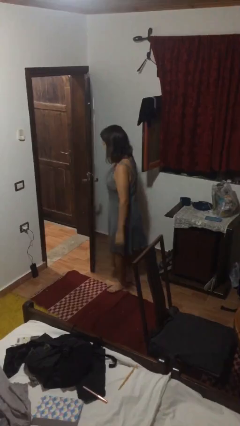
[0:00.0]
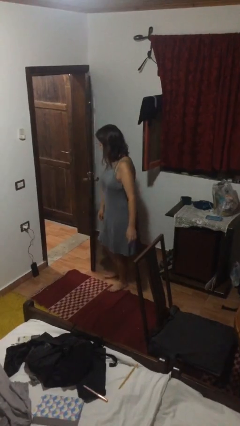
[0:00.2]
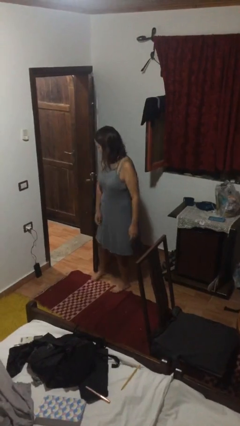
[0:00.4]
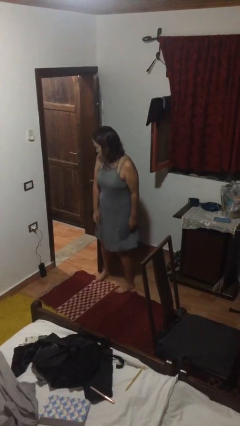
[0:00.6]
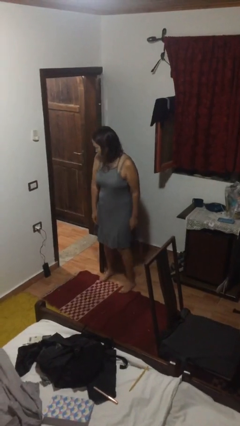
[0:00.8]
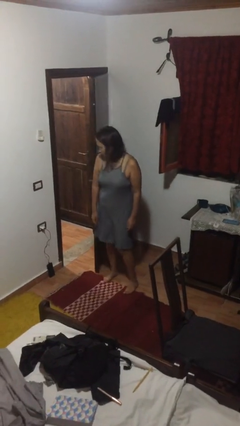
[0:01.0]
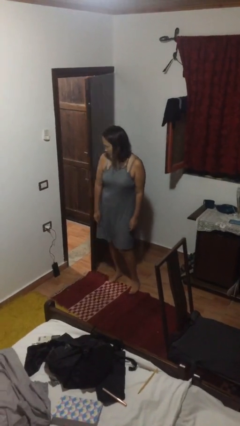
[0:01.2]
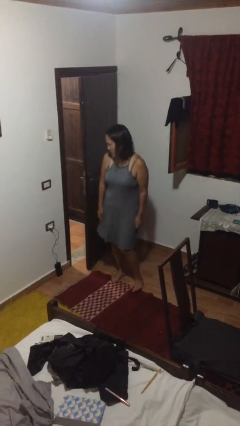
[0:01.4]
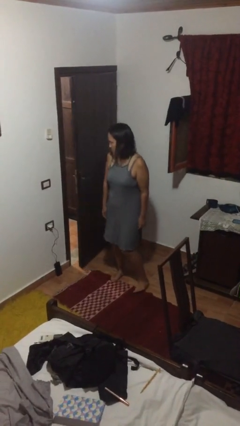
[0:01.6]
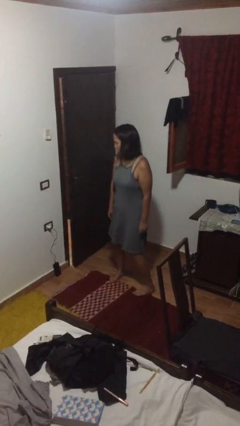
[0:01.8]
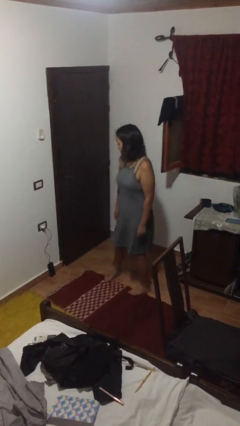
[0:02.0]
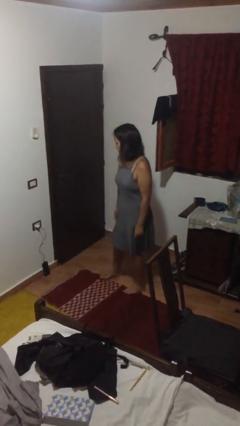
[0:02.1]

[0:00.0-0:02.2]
person closes door with hip

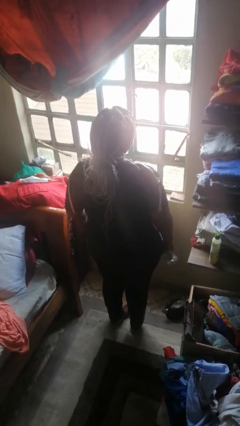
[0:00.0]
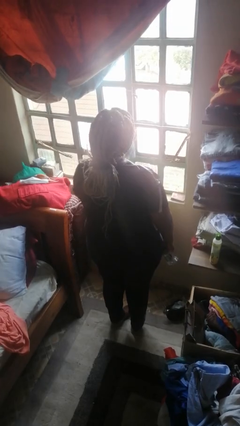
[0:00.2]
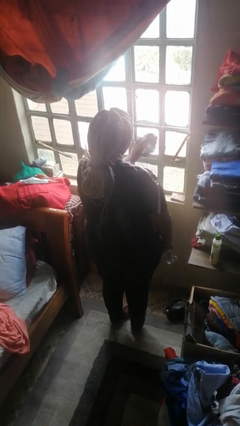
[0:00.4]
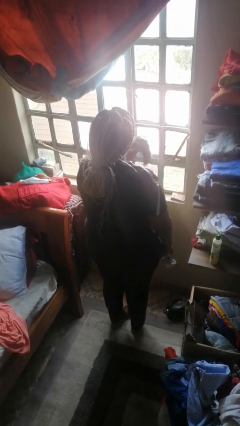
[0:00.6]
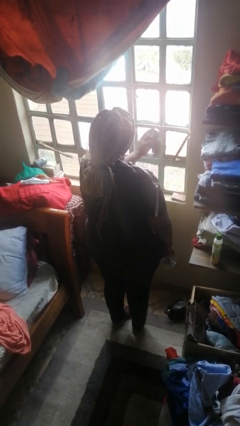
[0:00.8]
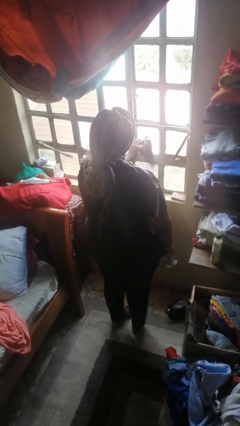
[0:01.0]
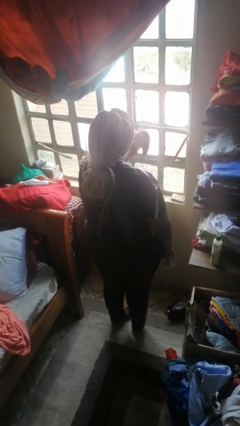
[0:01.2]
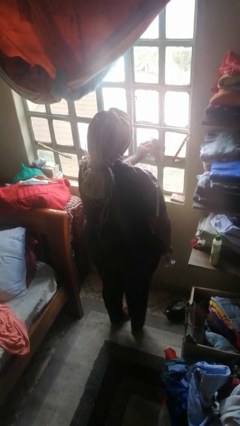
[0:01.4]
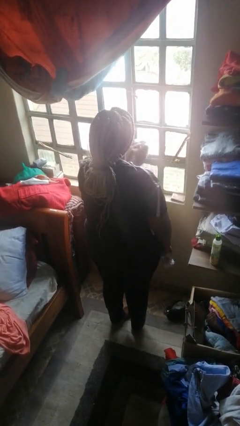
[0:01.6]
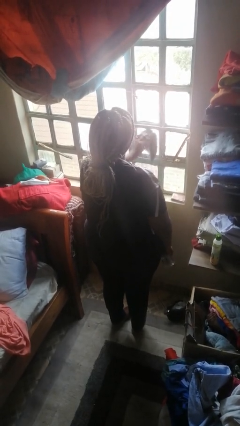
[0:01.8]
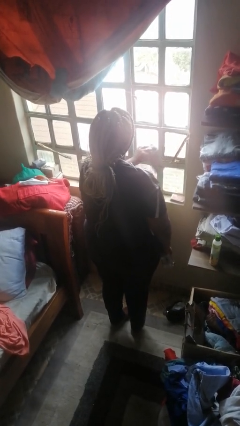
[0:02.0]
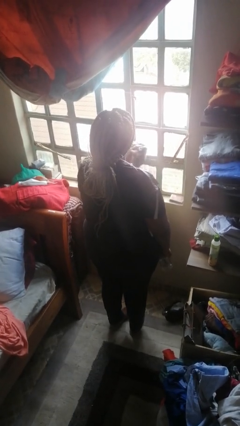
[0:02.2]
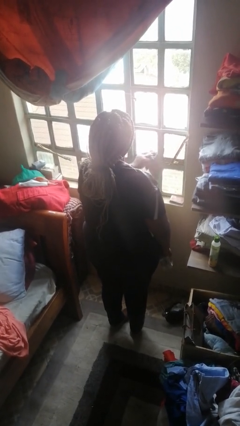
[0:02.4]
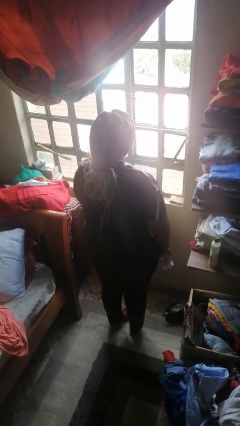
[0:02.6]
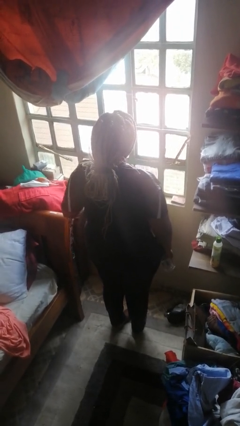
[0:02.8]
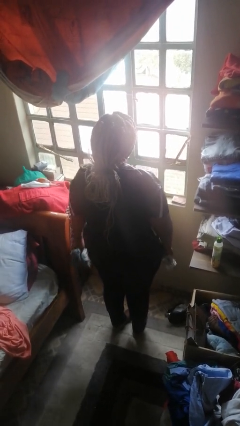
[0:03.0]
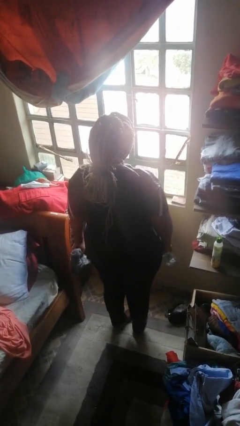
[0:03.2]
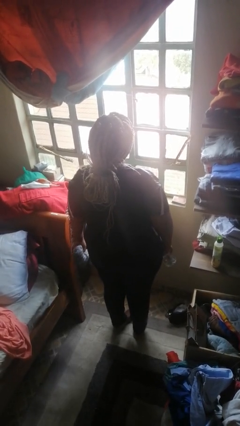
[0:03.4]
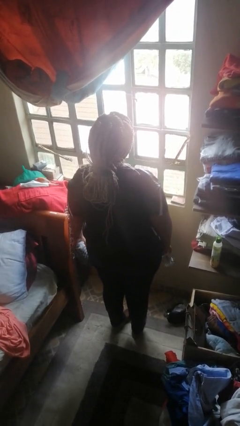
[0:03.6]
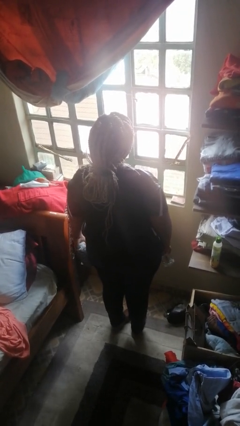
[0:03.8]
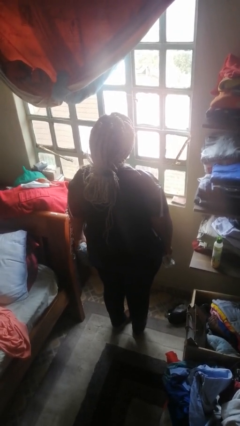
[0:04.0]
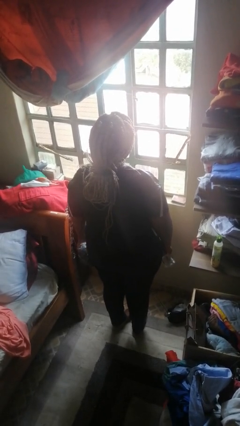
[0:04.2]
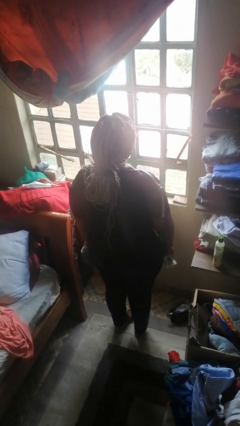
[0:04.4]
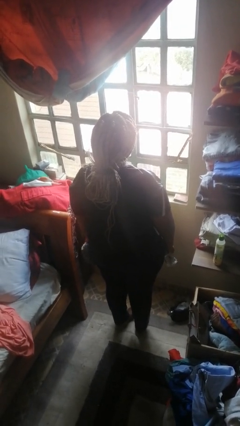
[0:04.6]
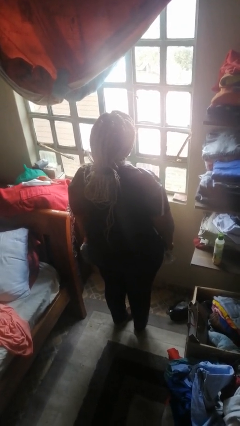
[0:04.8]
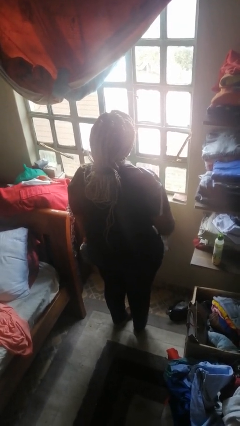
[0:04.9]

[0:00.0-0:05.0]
person washes window

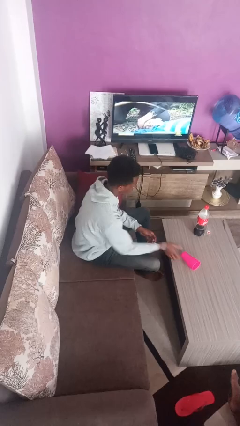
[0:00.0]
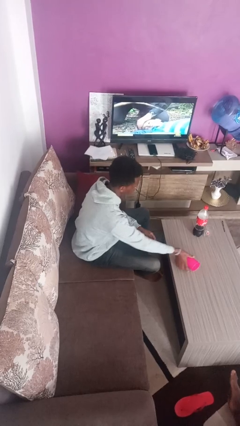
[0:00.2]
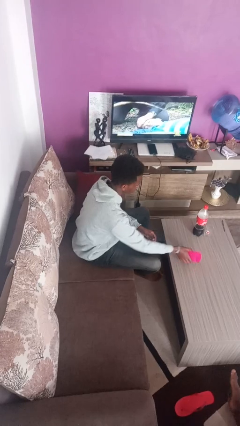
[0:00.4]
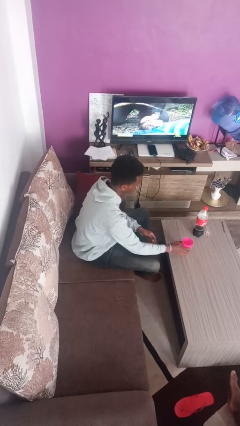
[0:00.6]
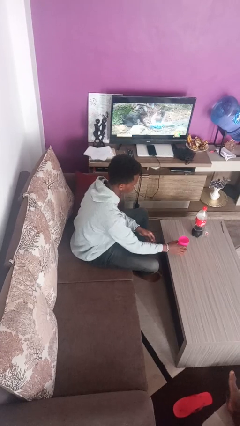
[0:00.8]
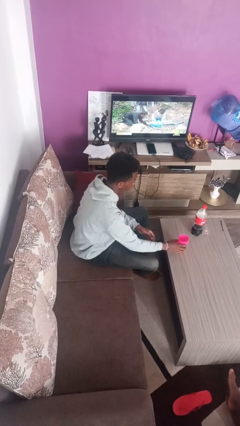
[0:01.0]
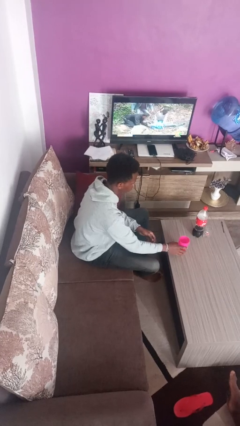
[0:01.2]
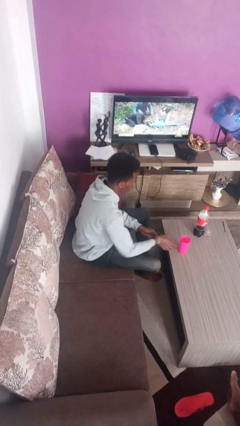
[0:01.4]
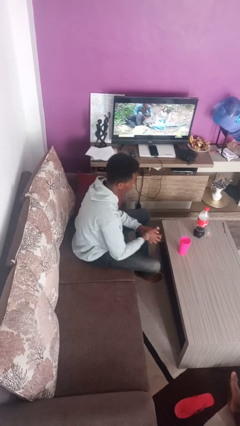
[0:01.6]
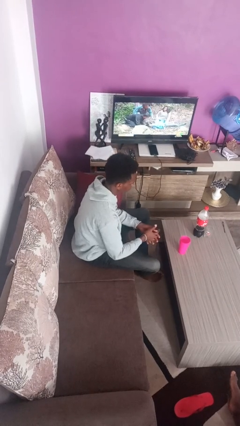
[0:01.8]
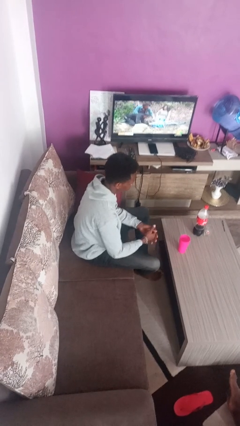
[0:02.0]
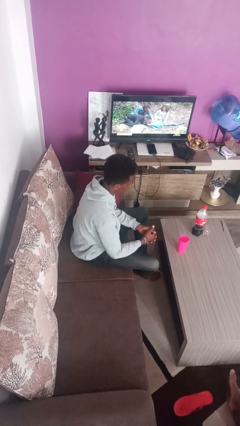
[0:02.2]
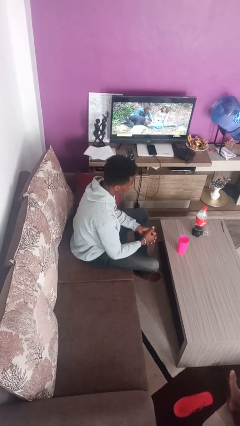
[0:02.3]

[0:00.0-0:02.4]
person sets upright glass

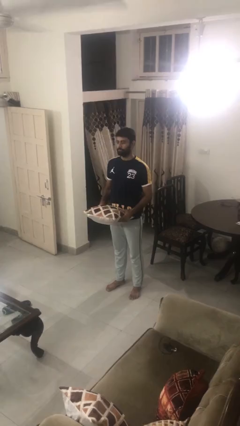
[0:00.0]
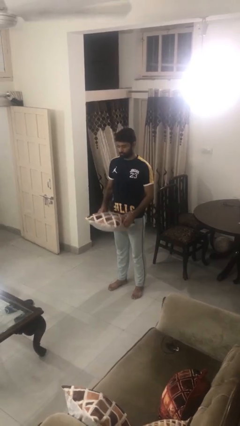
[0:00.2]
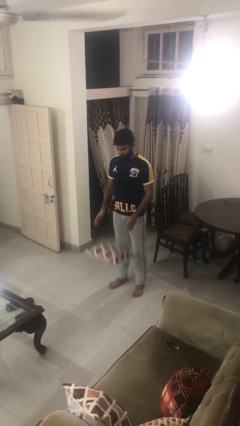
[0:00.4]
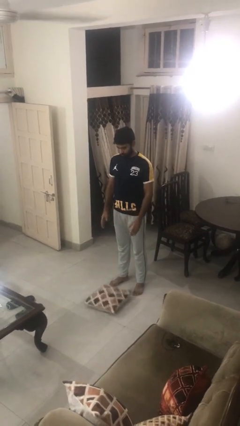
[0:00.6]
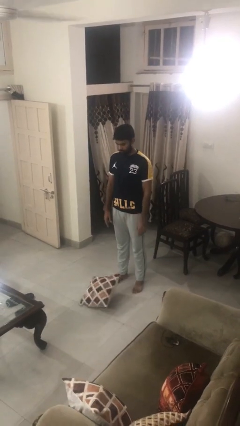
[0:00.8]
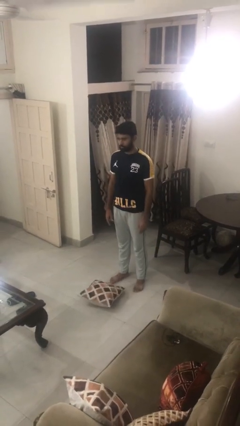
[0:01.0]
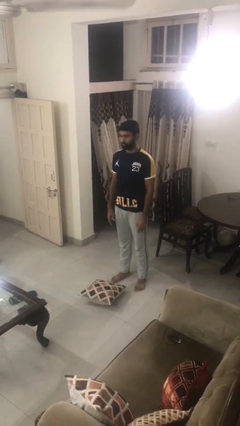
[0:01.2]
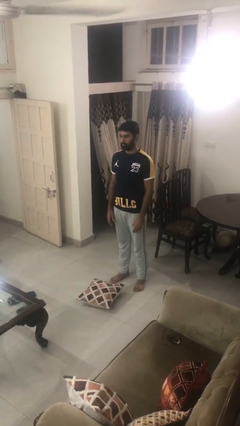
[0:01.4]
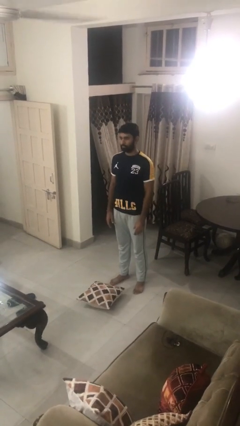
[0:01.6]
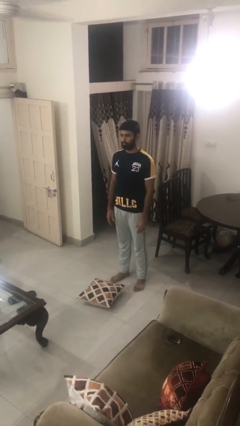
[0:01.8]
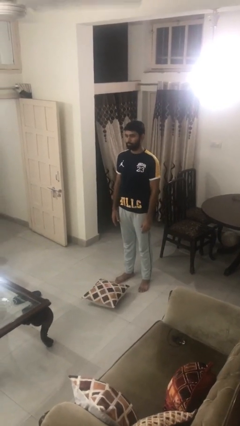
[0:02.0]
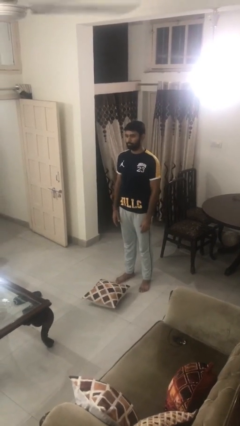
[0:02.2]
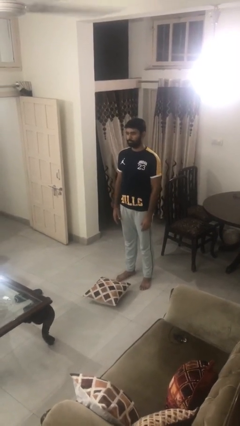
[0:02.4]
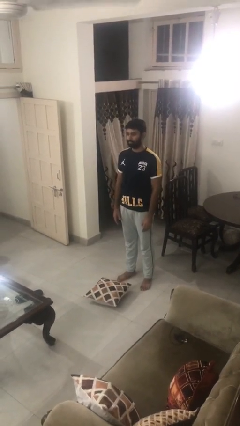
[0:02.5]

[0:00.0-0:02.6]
person drops object

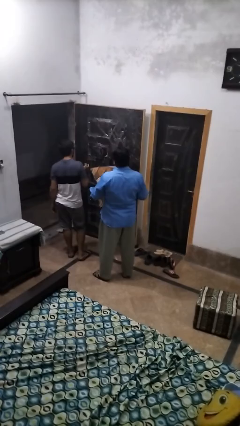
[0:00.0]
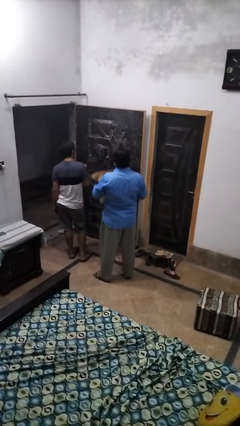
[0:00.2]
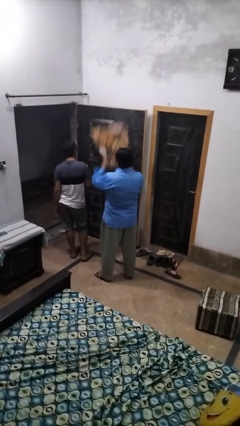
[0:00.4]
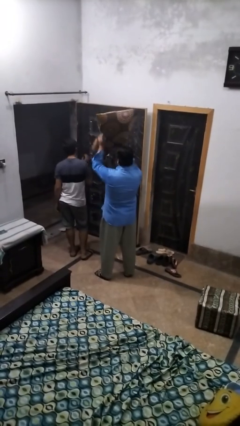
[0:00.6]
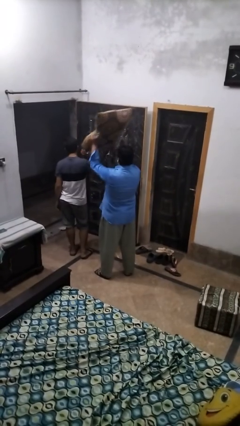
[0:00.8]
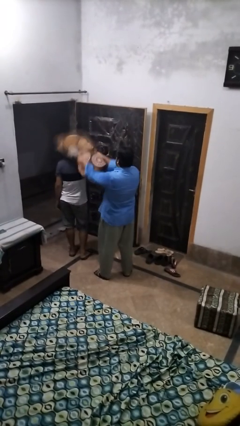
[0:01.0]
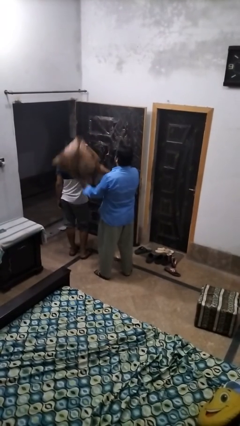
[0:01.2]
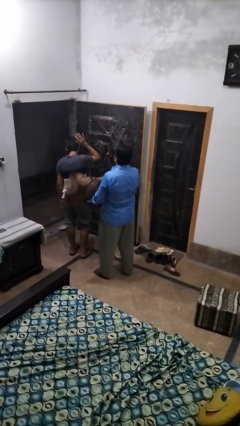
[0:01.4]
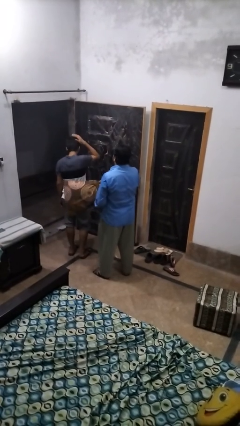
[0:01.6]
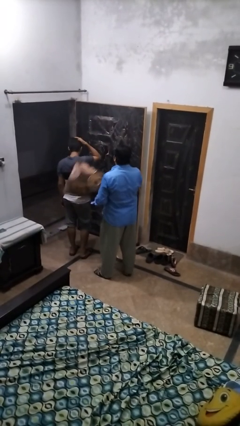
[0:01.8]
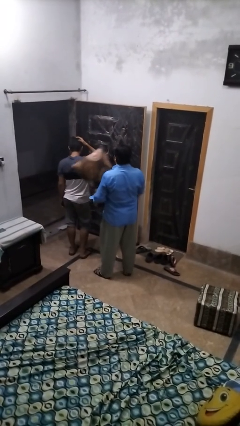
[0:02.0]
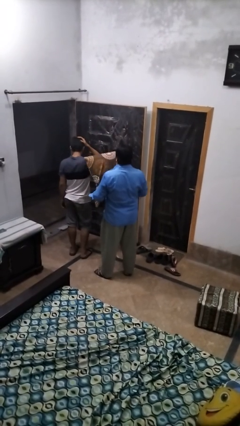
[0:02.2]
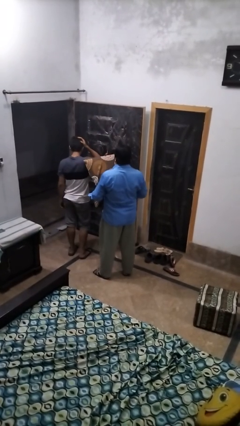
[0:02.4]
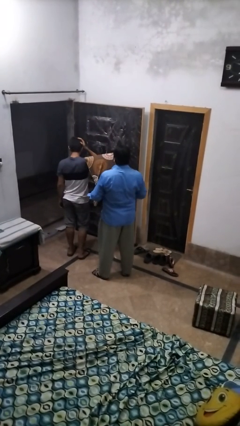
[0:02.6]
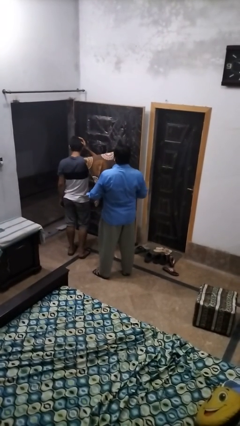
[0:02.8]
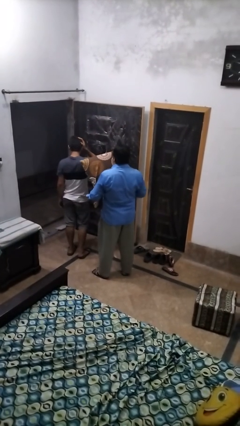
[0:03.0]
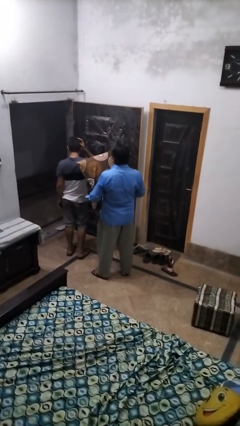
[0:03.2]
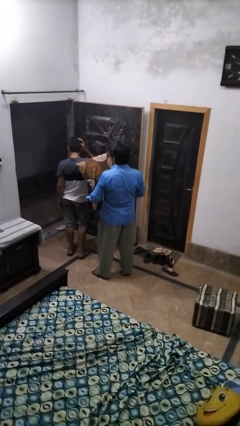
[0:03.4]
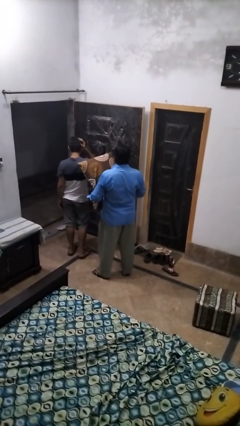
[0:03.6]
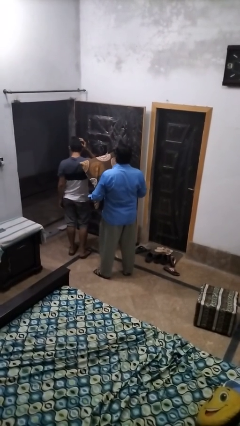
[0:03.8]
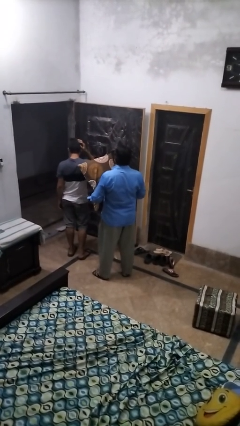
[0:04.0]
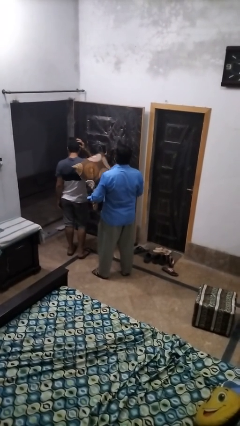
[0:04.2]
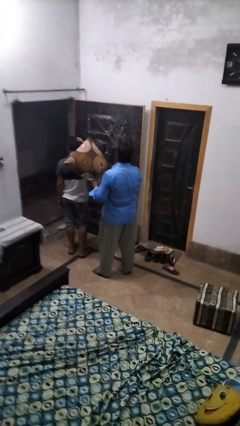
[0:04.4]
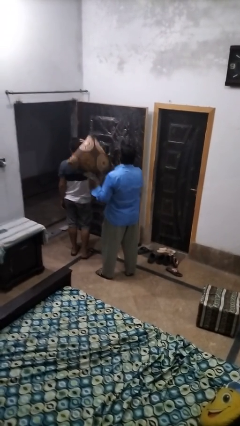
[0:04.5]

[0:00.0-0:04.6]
person hits person with pillow

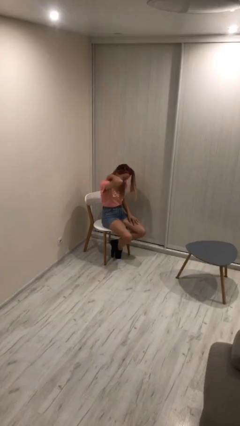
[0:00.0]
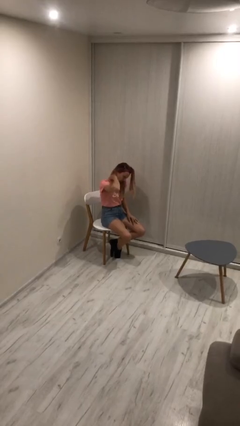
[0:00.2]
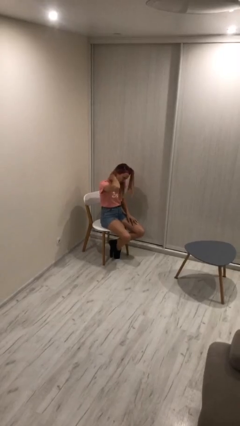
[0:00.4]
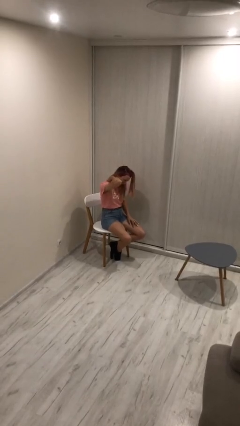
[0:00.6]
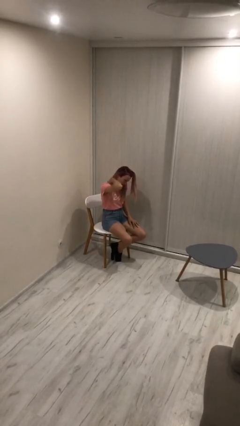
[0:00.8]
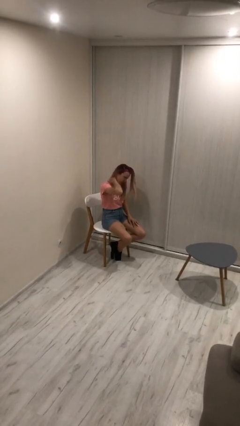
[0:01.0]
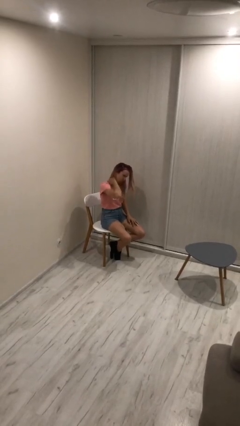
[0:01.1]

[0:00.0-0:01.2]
person rubs neck
